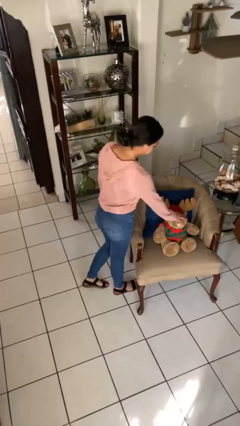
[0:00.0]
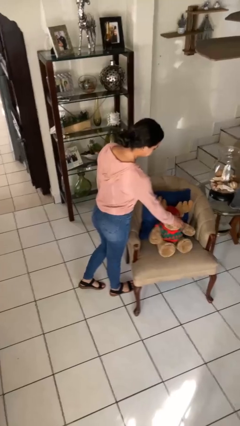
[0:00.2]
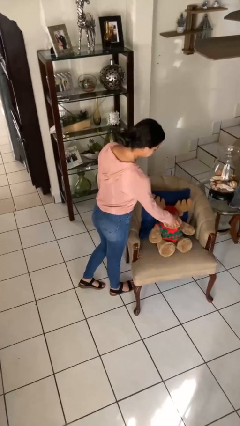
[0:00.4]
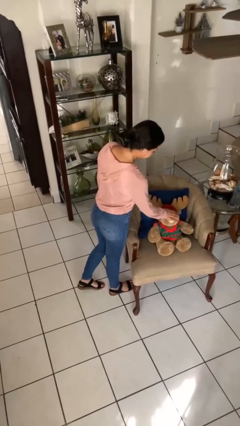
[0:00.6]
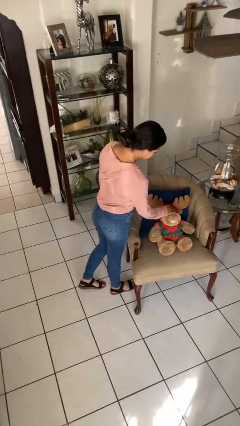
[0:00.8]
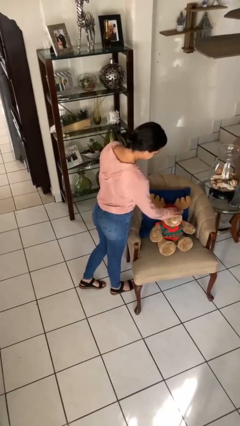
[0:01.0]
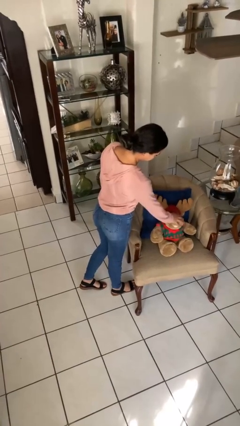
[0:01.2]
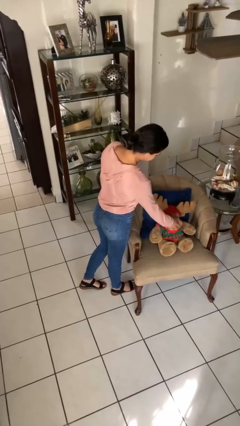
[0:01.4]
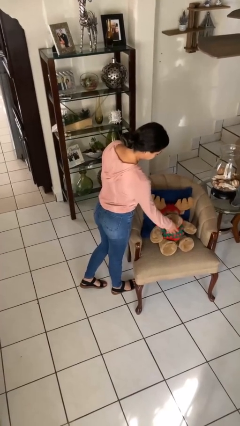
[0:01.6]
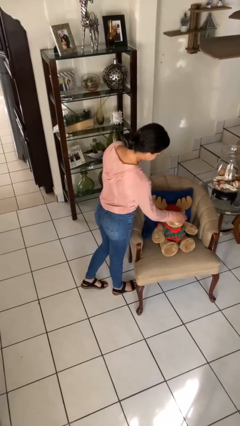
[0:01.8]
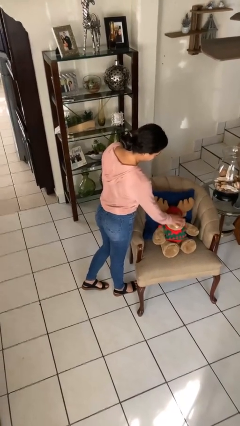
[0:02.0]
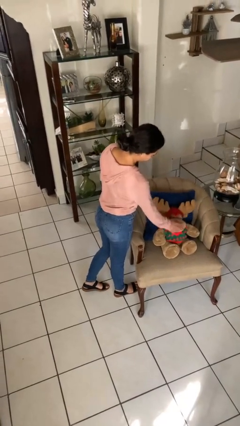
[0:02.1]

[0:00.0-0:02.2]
person waves hand over object

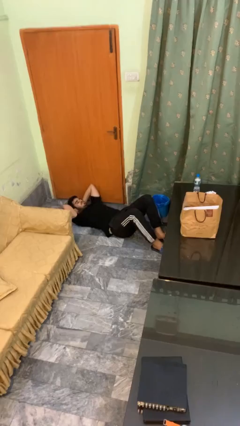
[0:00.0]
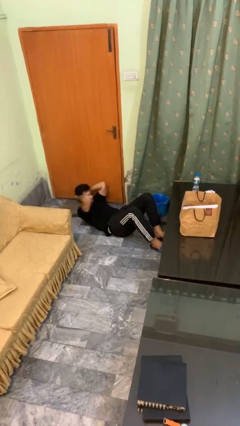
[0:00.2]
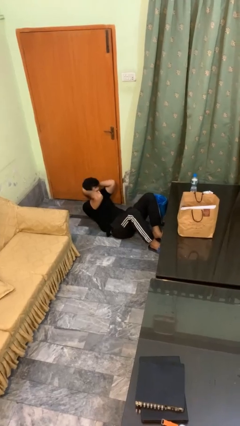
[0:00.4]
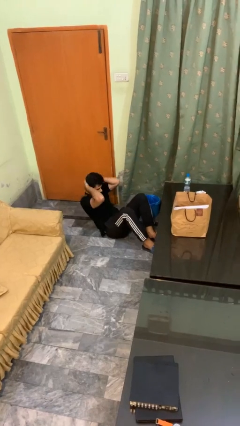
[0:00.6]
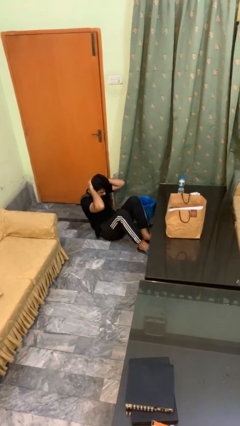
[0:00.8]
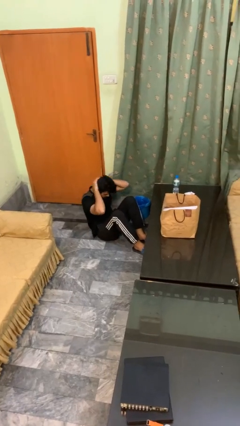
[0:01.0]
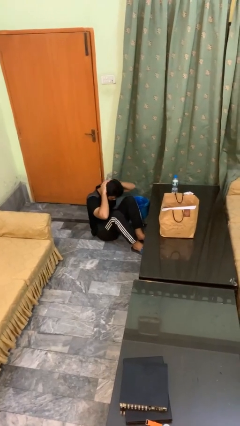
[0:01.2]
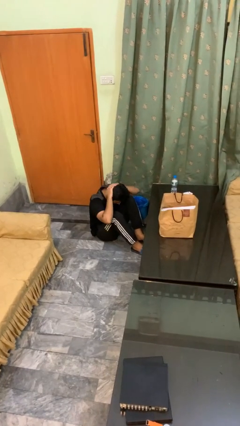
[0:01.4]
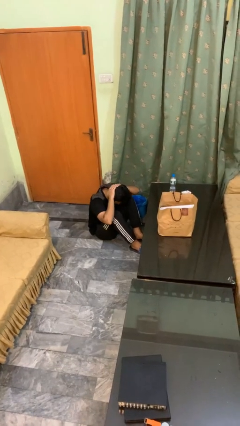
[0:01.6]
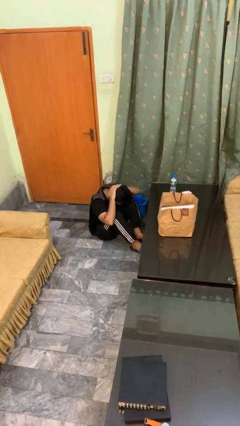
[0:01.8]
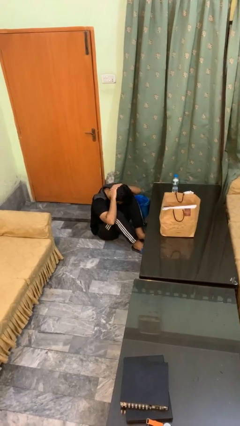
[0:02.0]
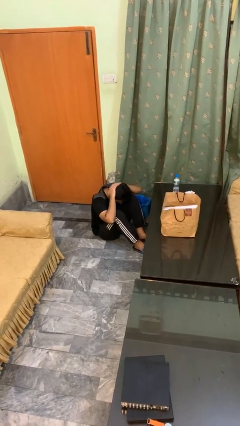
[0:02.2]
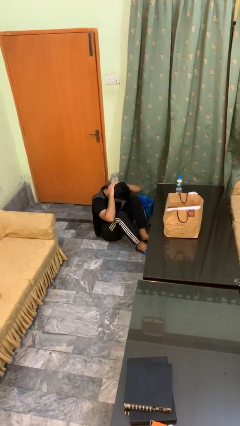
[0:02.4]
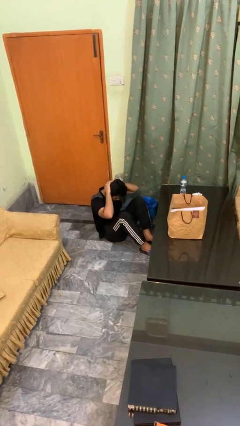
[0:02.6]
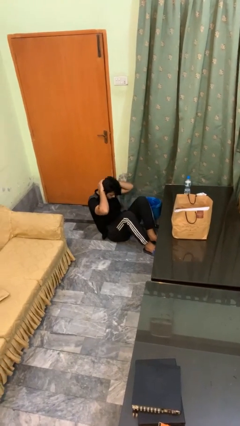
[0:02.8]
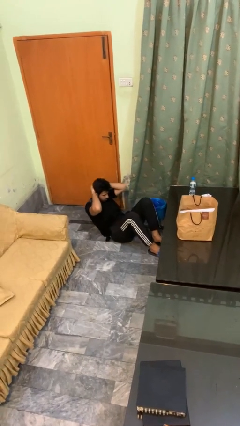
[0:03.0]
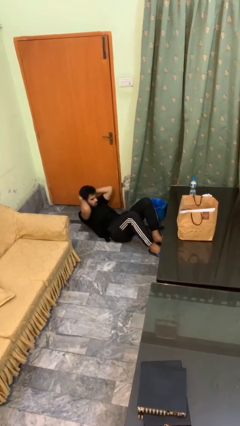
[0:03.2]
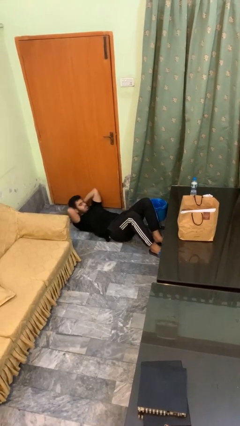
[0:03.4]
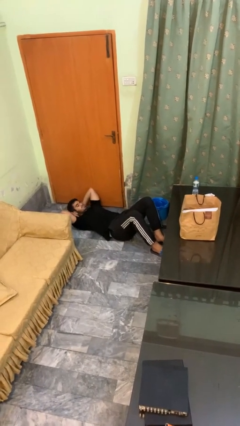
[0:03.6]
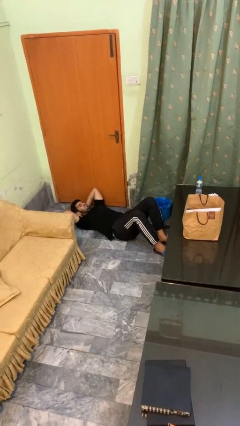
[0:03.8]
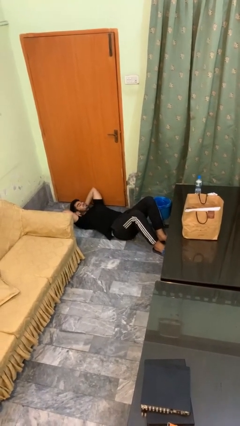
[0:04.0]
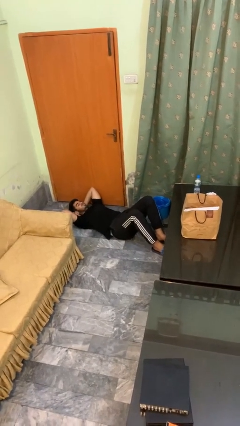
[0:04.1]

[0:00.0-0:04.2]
person exercises with situp

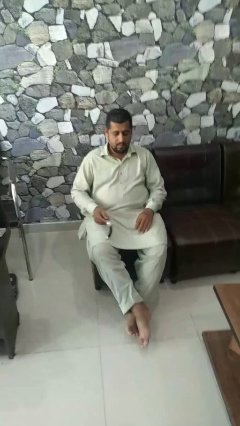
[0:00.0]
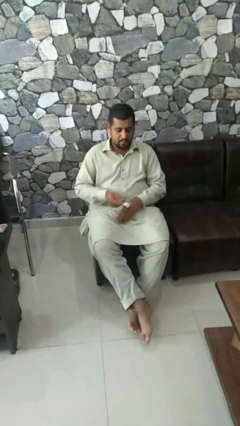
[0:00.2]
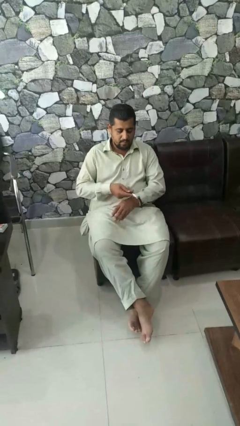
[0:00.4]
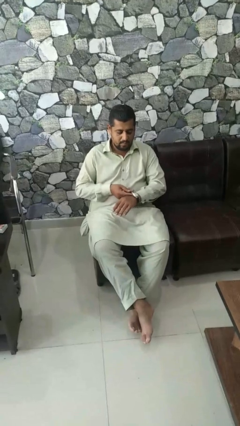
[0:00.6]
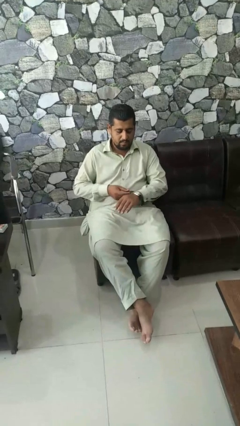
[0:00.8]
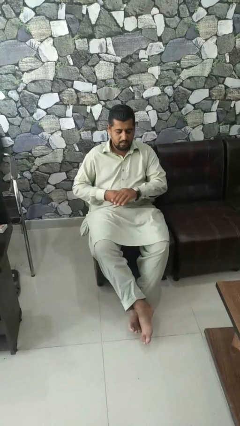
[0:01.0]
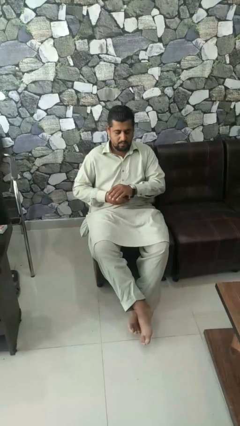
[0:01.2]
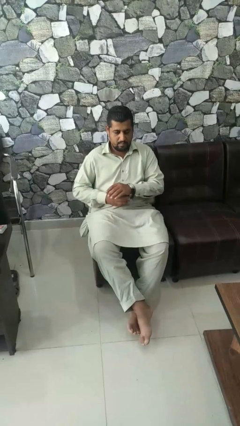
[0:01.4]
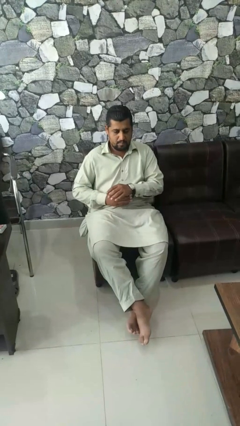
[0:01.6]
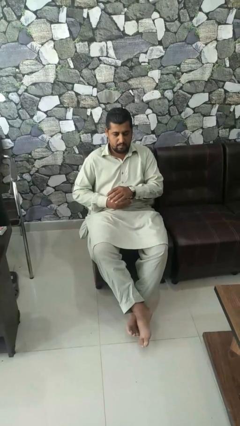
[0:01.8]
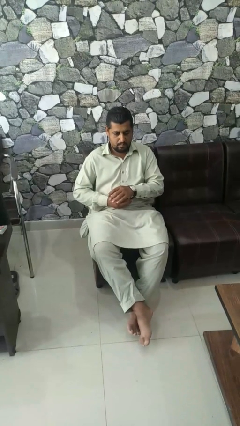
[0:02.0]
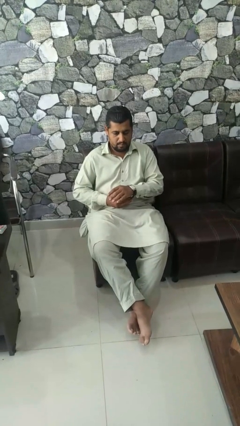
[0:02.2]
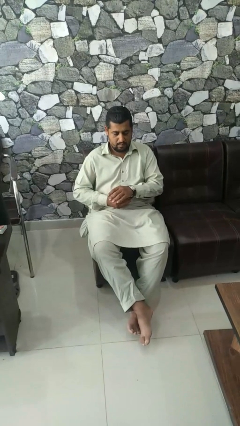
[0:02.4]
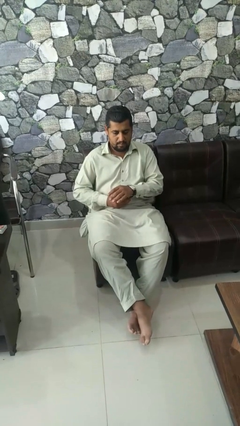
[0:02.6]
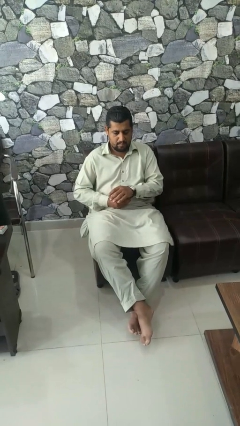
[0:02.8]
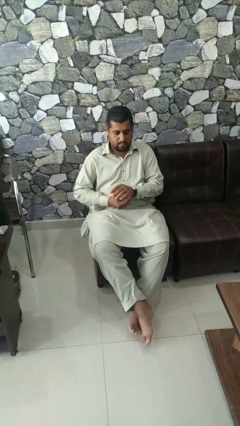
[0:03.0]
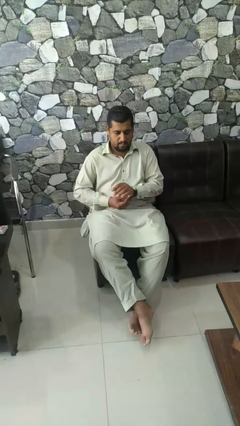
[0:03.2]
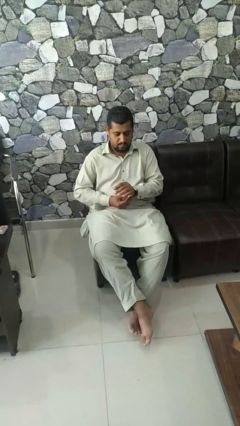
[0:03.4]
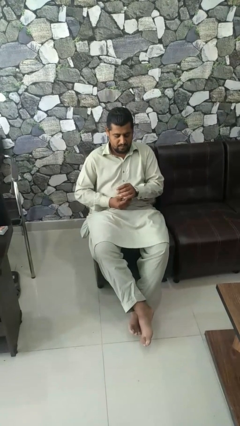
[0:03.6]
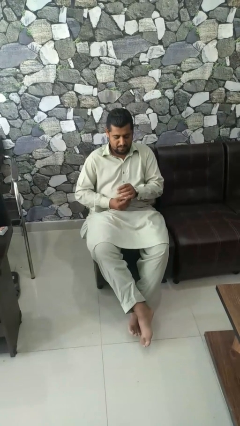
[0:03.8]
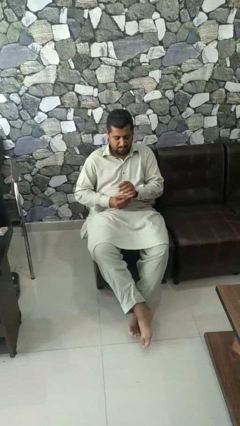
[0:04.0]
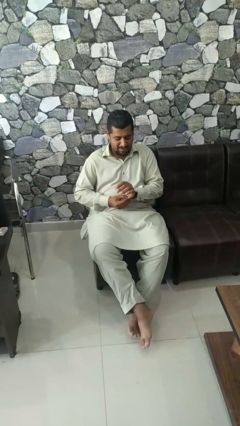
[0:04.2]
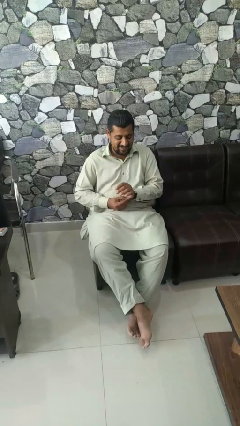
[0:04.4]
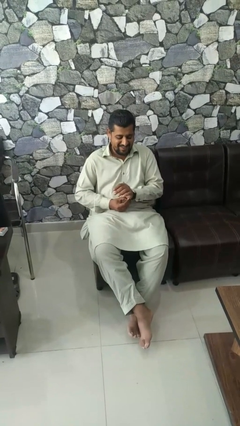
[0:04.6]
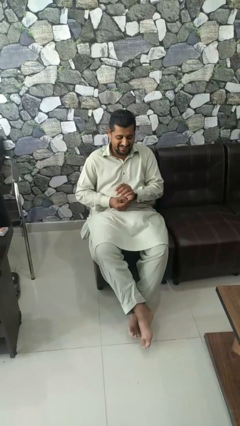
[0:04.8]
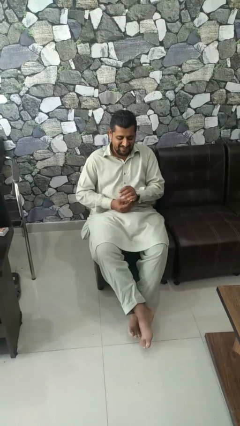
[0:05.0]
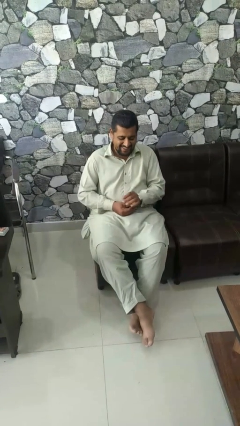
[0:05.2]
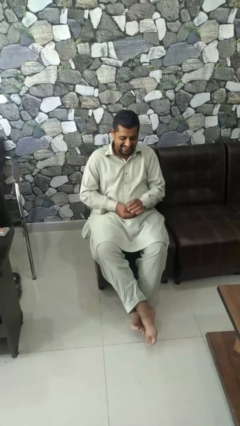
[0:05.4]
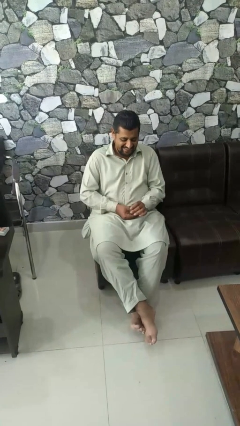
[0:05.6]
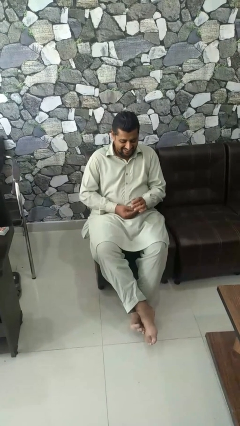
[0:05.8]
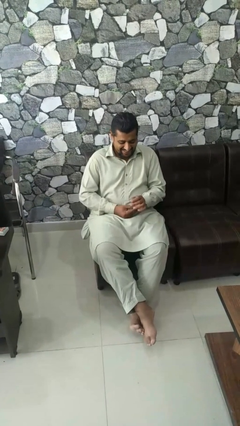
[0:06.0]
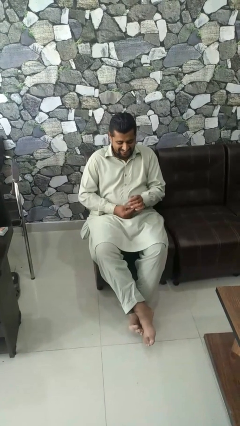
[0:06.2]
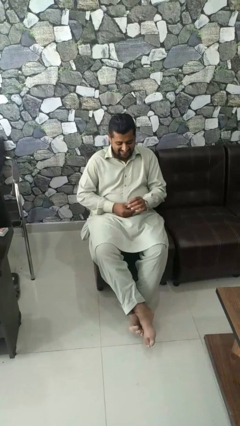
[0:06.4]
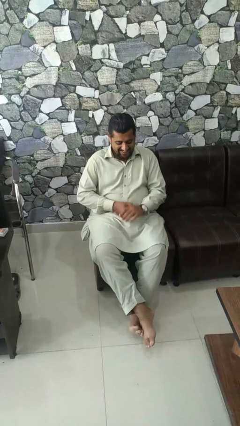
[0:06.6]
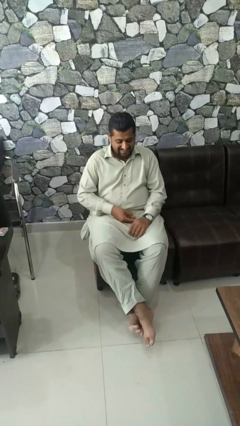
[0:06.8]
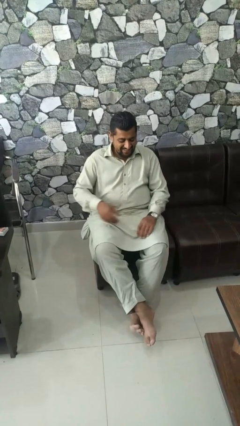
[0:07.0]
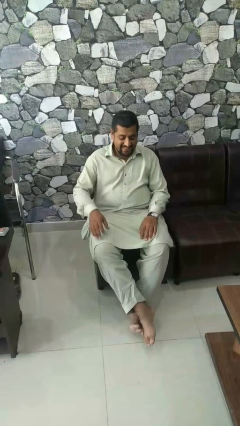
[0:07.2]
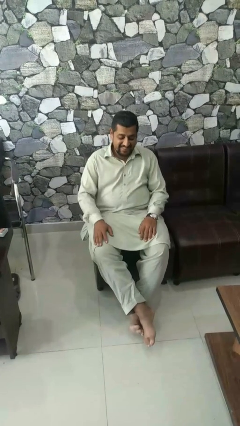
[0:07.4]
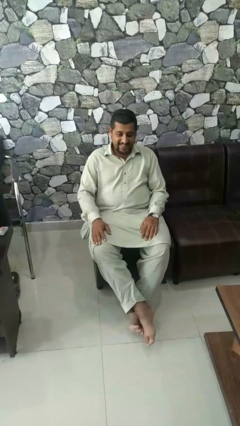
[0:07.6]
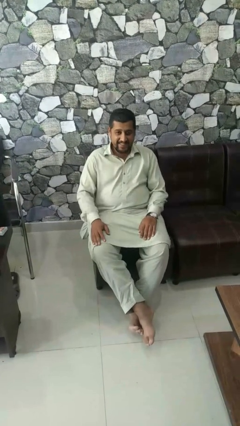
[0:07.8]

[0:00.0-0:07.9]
person puts on wristwatch

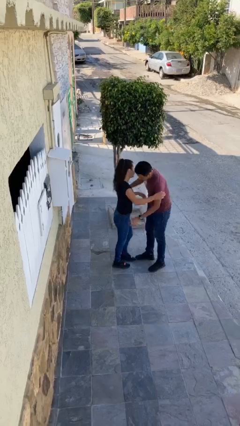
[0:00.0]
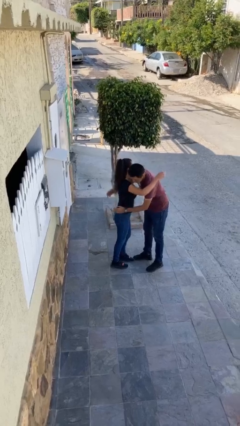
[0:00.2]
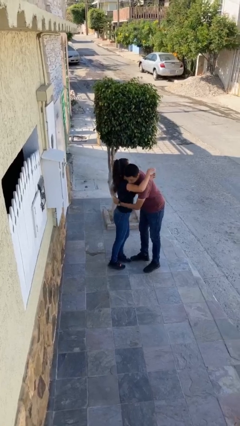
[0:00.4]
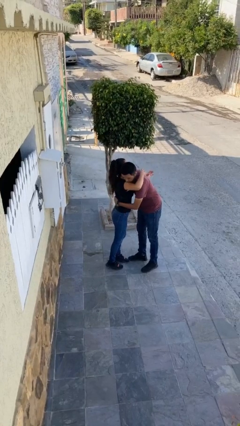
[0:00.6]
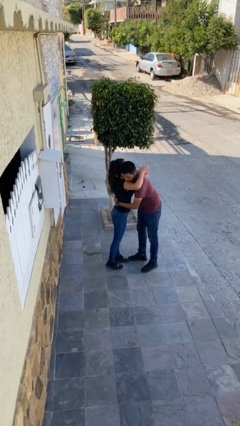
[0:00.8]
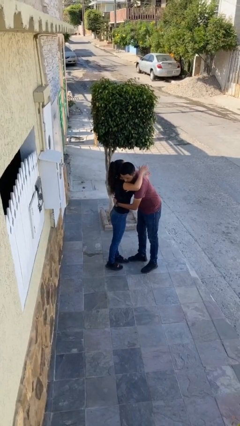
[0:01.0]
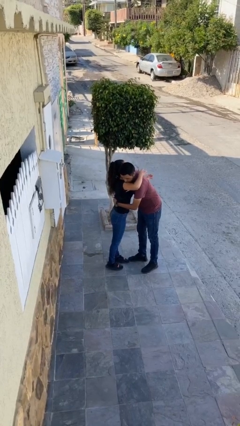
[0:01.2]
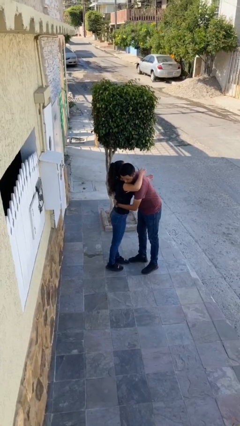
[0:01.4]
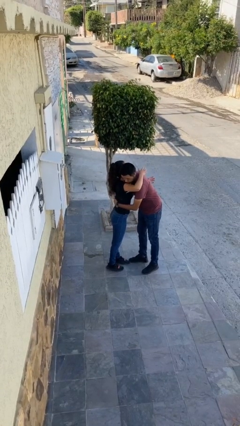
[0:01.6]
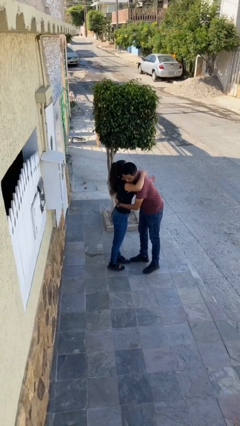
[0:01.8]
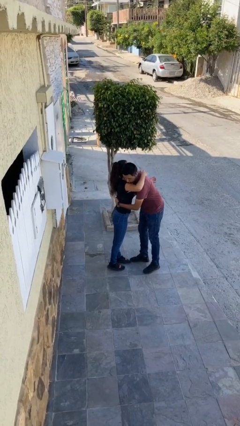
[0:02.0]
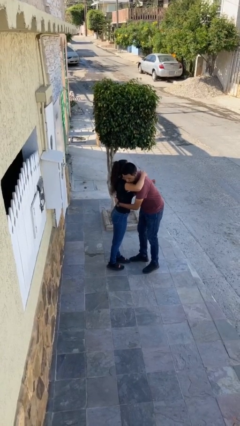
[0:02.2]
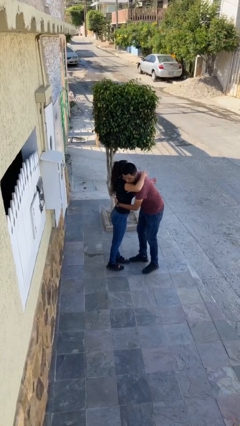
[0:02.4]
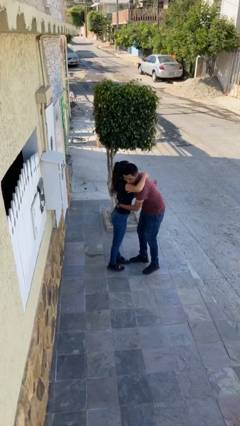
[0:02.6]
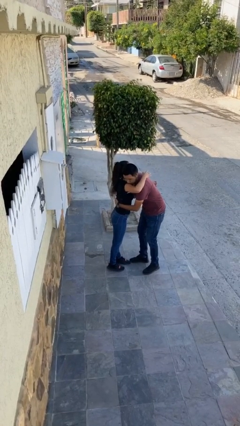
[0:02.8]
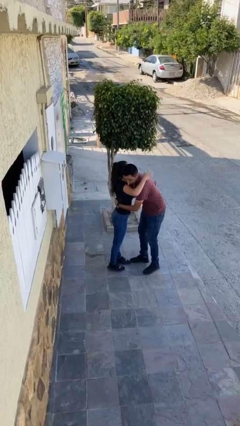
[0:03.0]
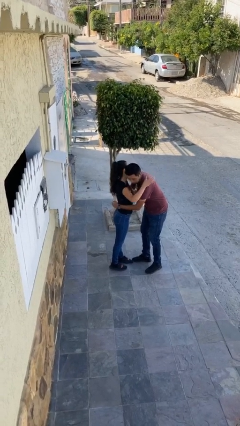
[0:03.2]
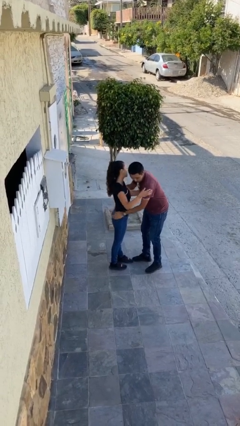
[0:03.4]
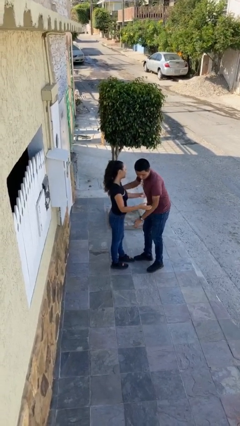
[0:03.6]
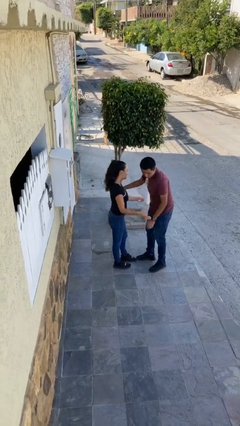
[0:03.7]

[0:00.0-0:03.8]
person embraces person
